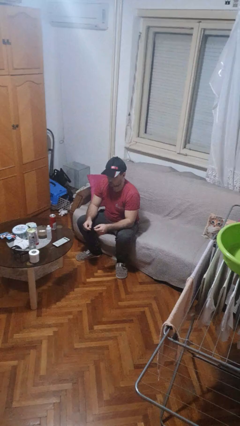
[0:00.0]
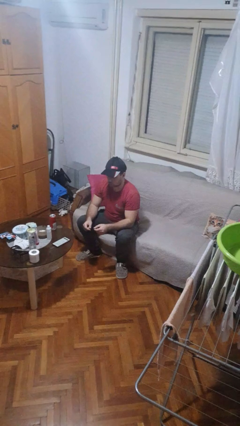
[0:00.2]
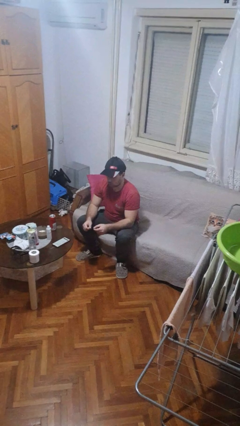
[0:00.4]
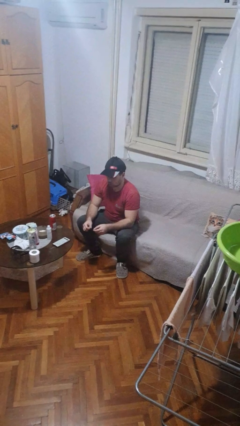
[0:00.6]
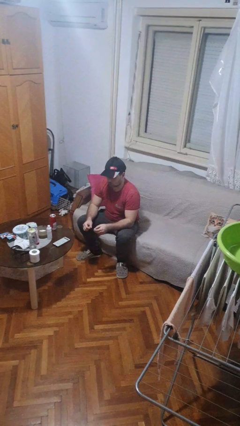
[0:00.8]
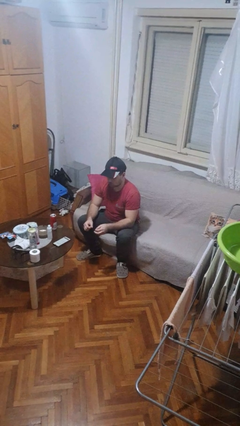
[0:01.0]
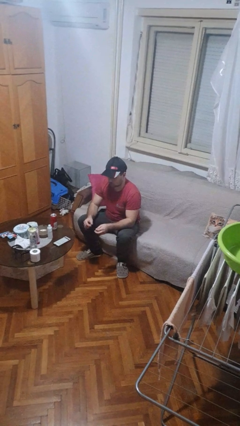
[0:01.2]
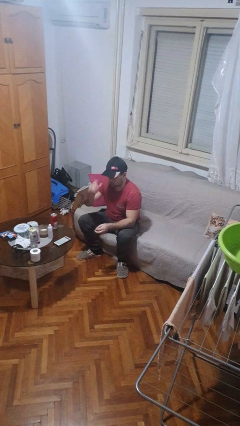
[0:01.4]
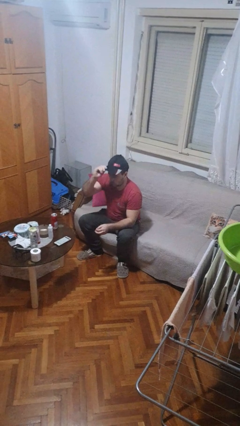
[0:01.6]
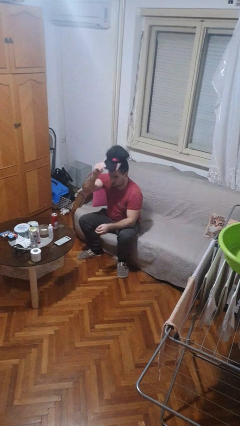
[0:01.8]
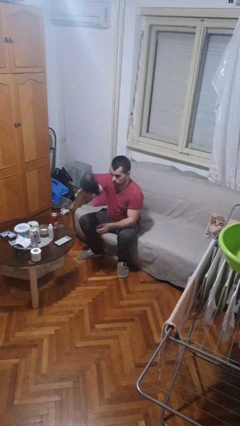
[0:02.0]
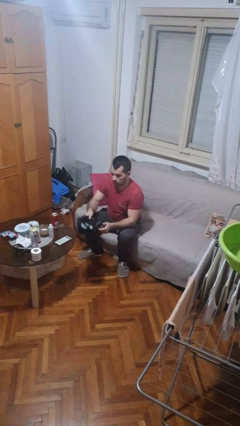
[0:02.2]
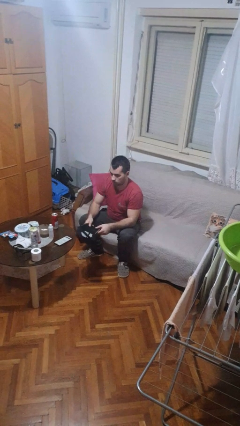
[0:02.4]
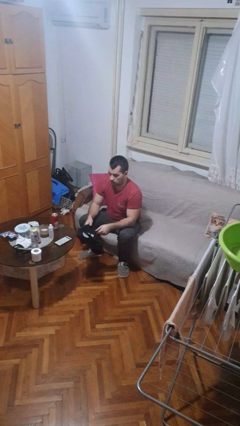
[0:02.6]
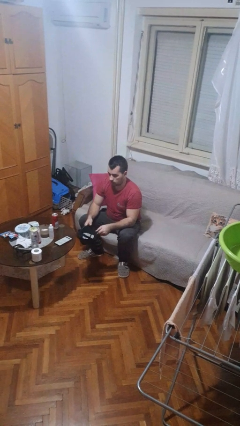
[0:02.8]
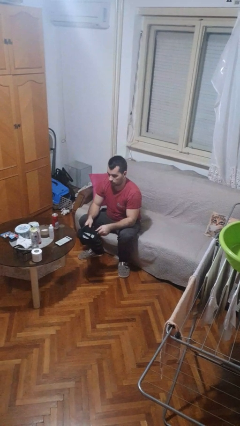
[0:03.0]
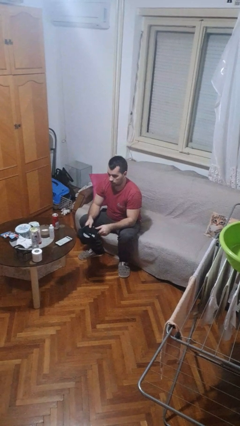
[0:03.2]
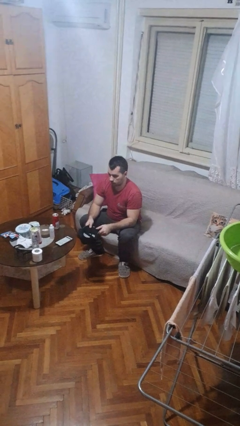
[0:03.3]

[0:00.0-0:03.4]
person takes off hat

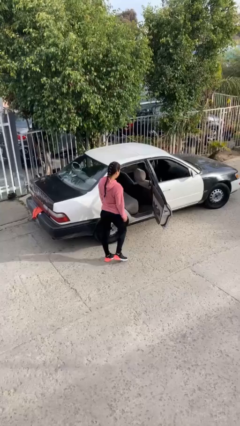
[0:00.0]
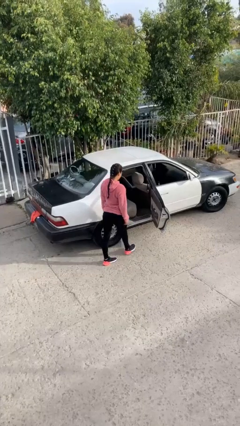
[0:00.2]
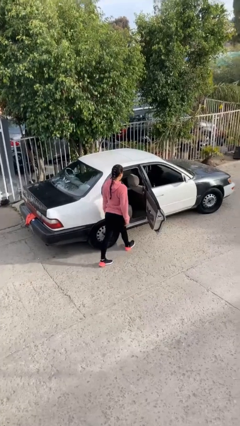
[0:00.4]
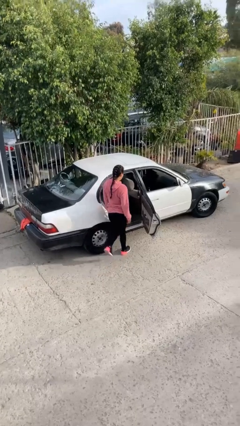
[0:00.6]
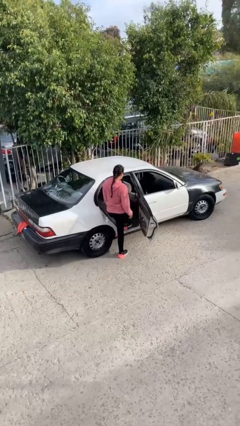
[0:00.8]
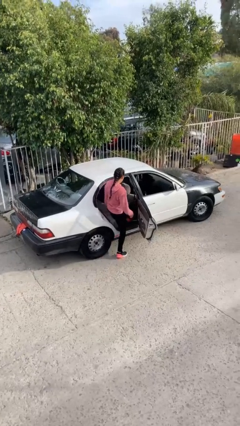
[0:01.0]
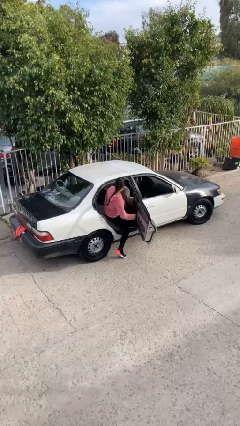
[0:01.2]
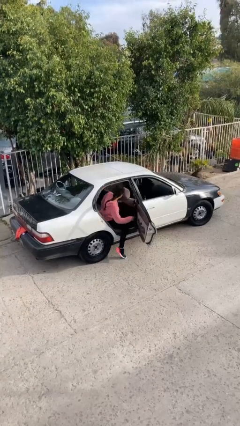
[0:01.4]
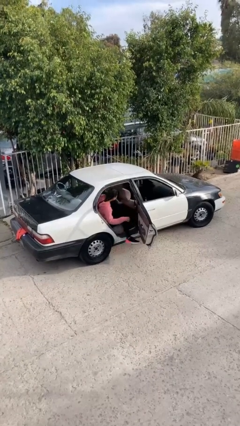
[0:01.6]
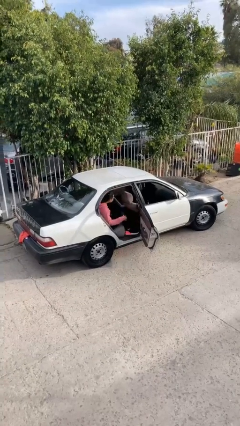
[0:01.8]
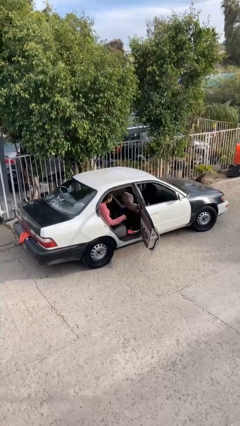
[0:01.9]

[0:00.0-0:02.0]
person enters car

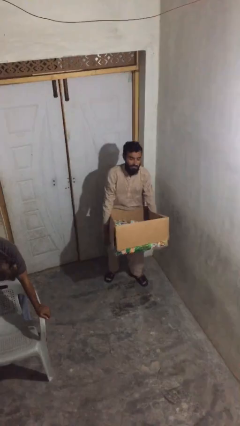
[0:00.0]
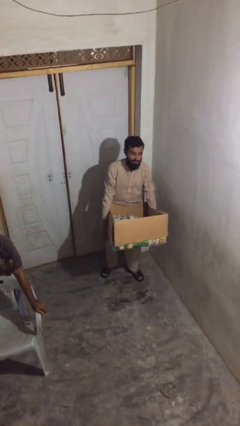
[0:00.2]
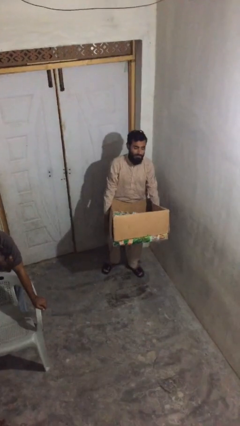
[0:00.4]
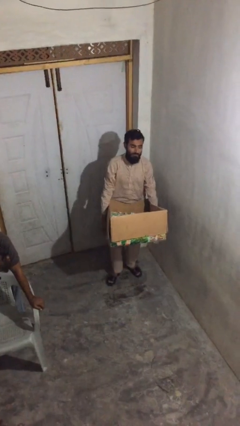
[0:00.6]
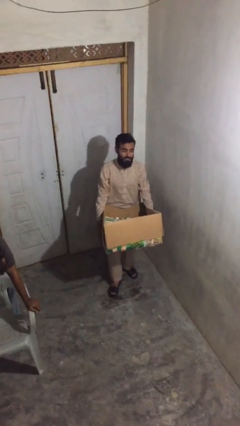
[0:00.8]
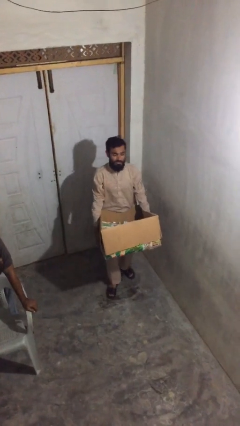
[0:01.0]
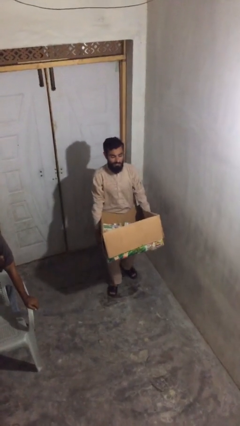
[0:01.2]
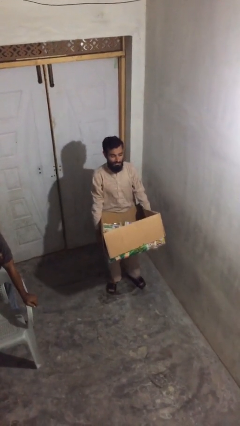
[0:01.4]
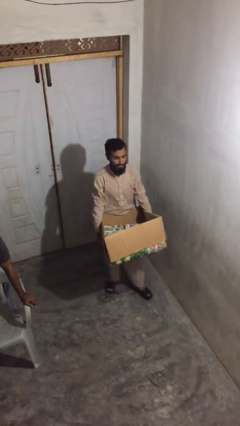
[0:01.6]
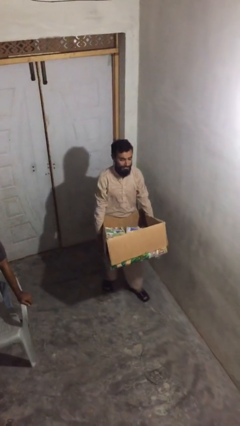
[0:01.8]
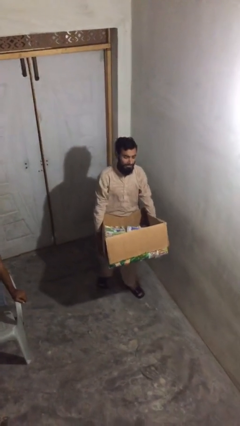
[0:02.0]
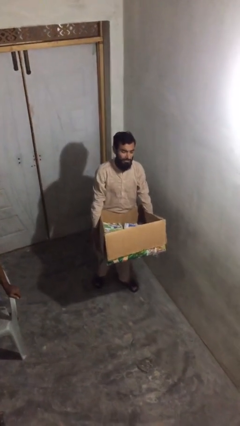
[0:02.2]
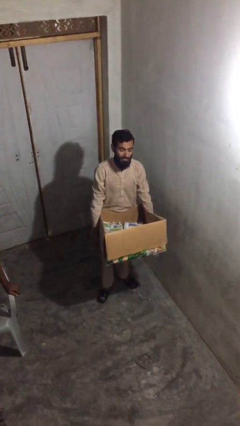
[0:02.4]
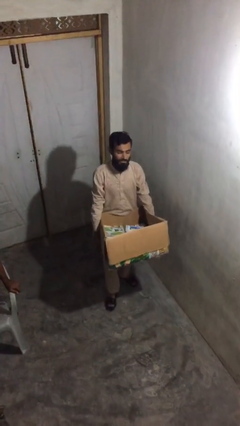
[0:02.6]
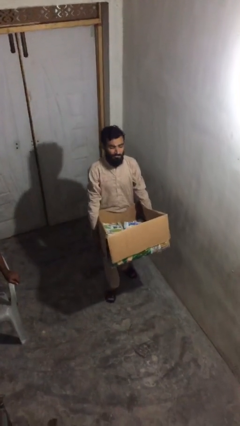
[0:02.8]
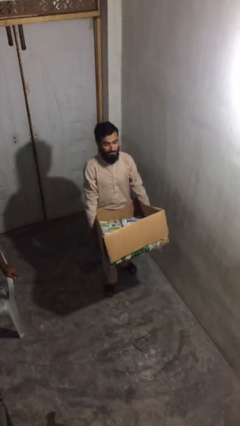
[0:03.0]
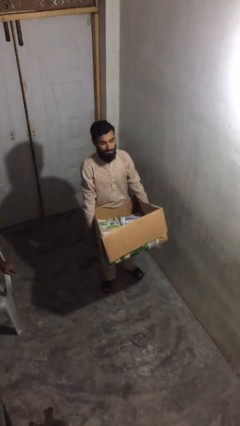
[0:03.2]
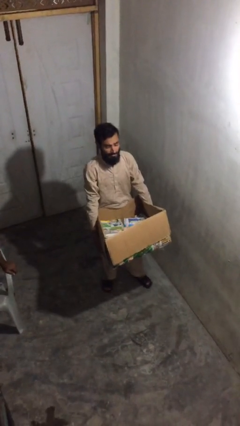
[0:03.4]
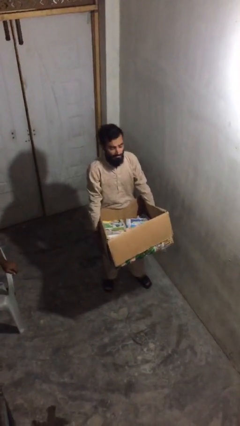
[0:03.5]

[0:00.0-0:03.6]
person carries heavy object

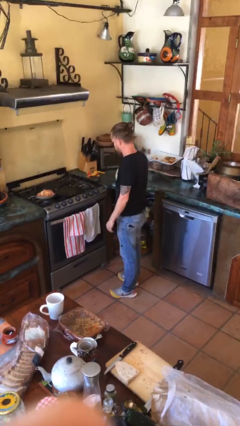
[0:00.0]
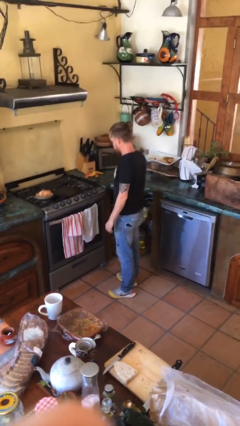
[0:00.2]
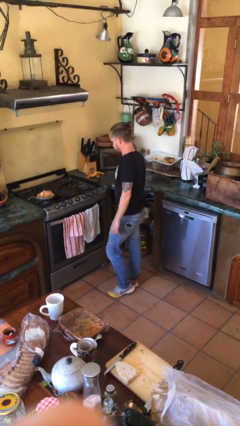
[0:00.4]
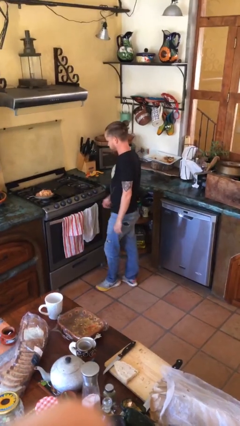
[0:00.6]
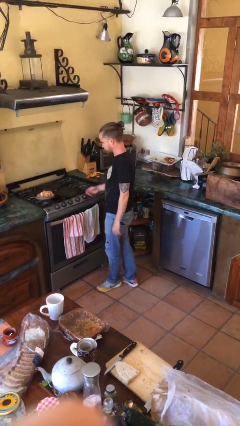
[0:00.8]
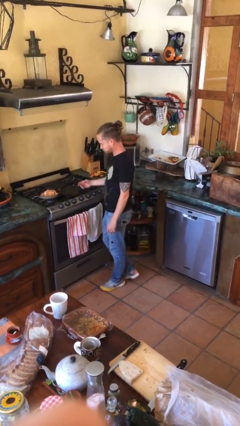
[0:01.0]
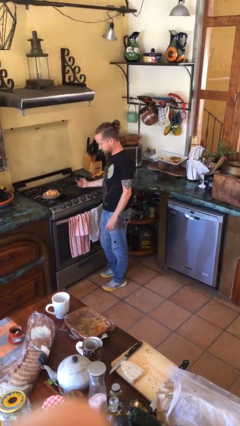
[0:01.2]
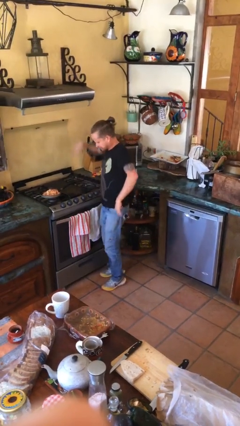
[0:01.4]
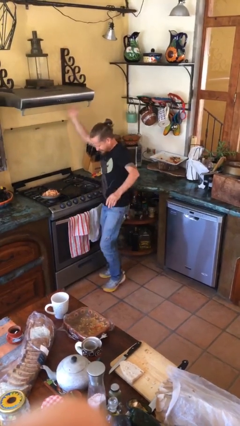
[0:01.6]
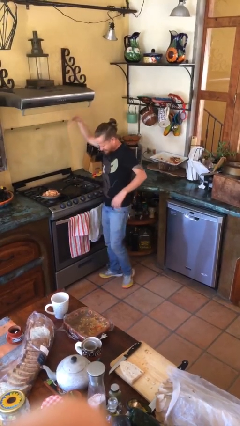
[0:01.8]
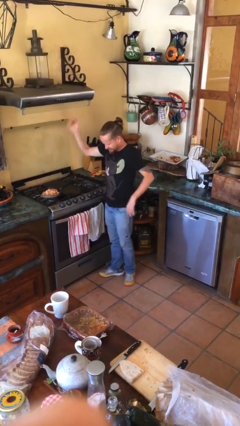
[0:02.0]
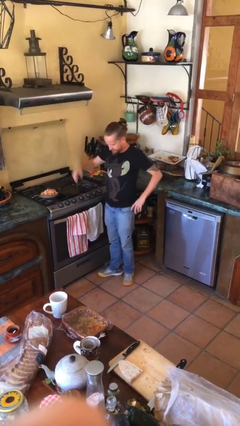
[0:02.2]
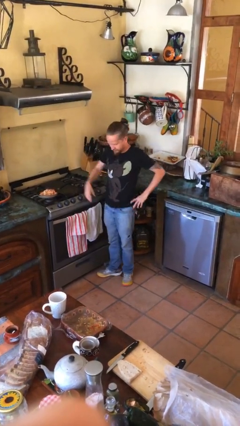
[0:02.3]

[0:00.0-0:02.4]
person burns hand

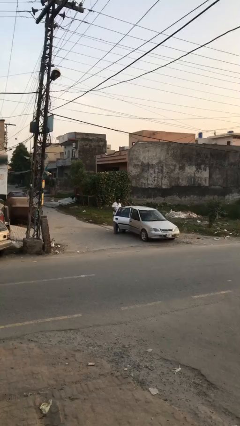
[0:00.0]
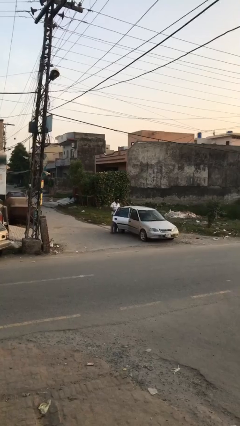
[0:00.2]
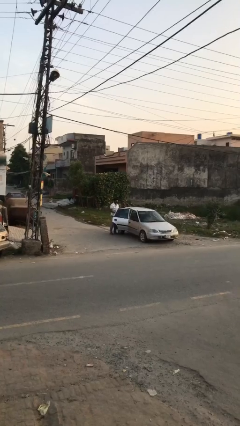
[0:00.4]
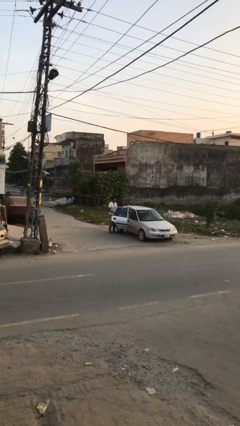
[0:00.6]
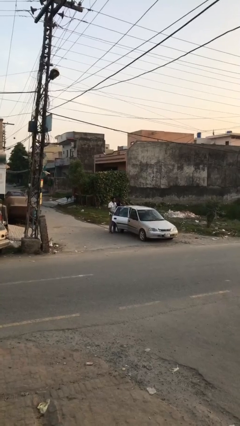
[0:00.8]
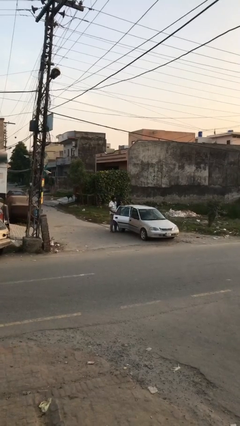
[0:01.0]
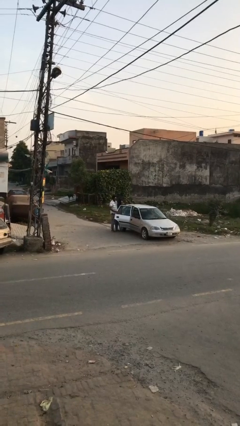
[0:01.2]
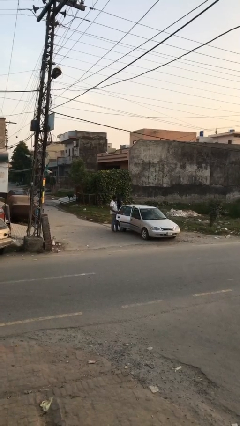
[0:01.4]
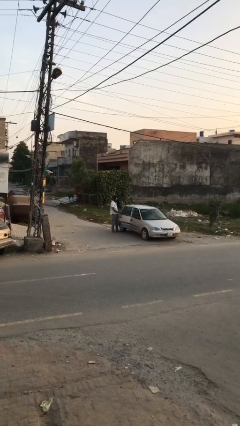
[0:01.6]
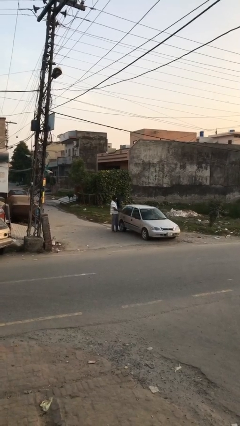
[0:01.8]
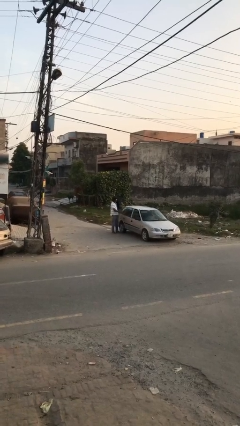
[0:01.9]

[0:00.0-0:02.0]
person closes car door

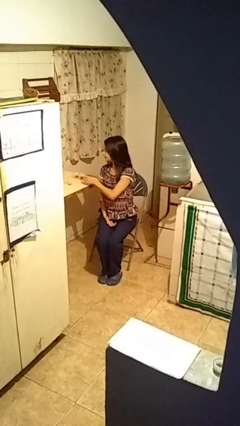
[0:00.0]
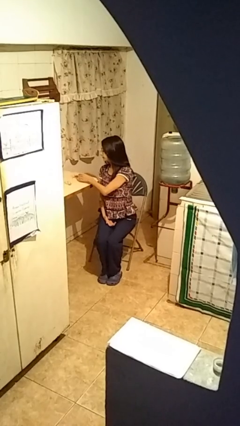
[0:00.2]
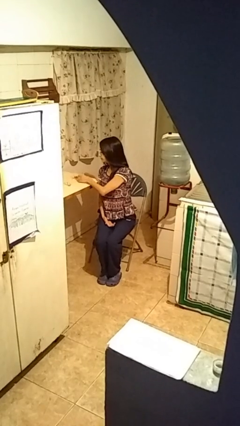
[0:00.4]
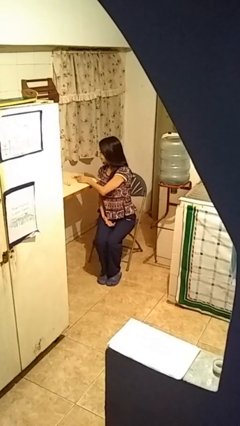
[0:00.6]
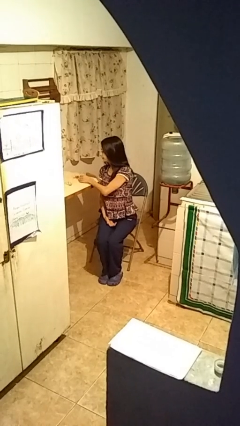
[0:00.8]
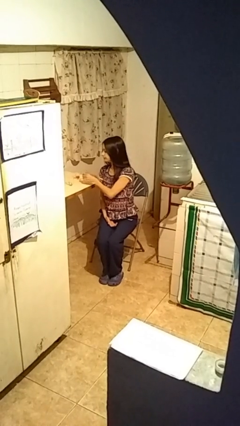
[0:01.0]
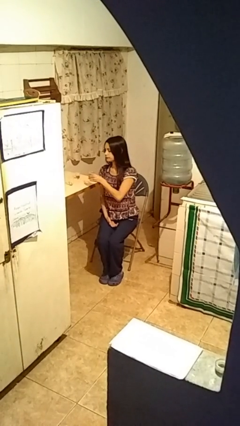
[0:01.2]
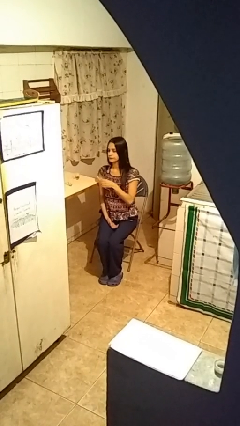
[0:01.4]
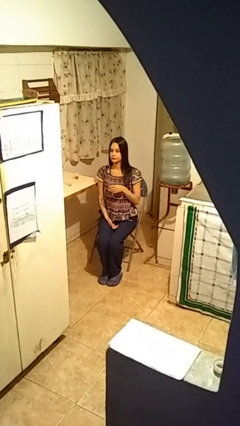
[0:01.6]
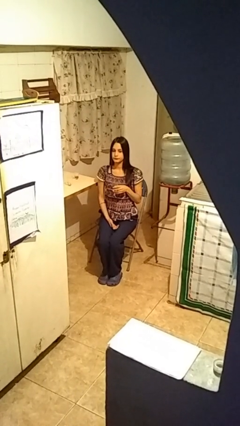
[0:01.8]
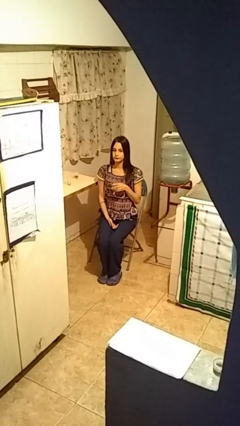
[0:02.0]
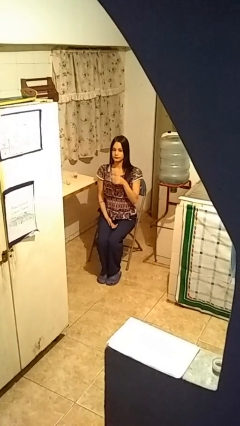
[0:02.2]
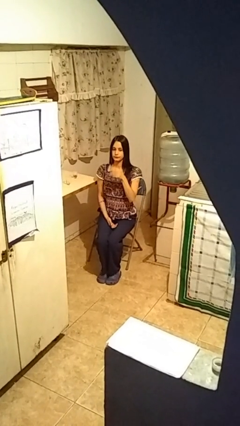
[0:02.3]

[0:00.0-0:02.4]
person picks up object from table

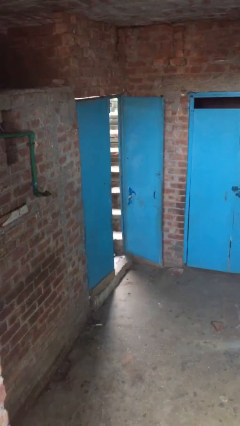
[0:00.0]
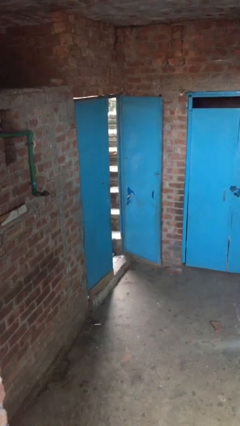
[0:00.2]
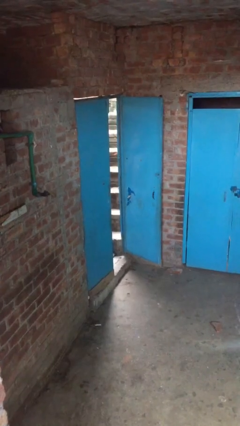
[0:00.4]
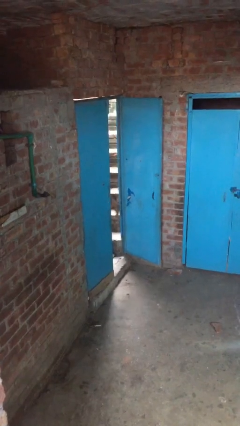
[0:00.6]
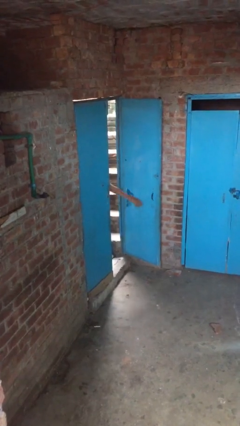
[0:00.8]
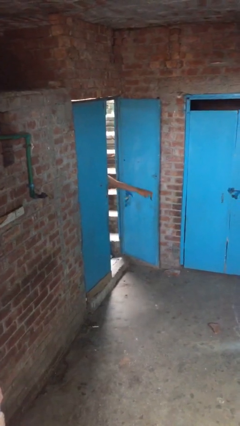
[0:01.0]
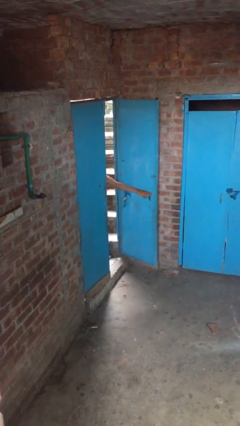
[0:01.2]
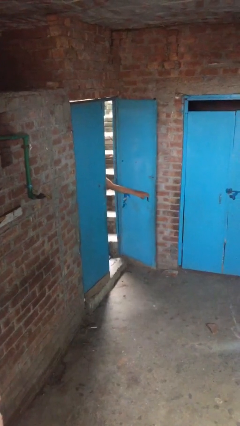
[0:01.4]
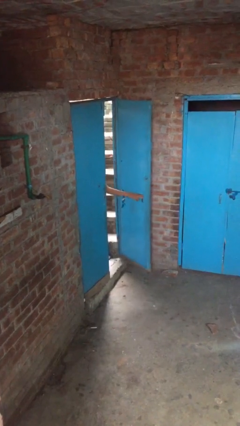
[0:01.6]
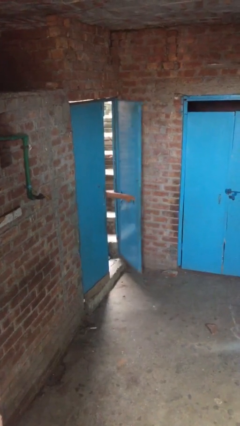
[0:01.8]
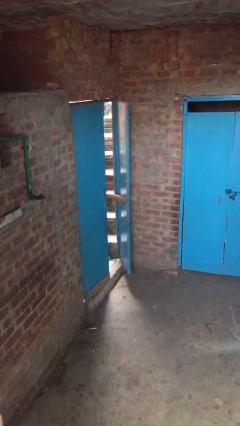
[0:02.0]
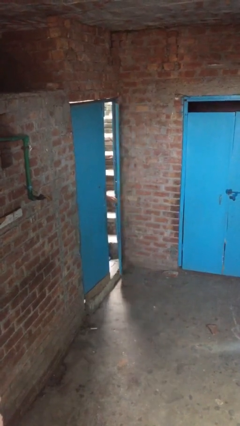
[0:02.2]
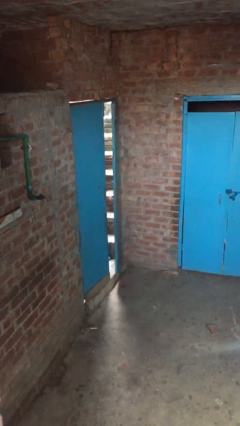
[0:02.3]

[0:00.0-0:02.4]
person closes facility door
